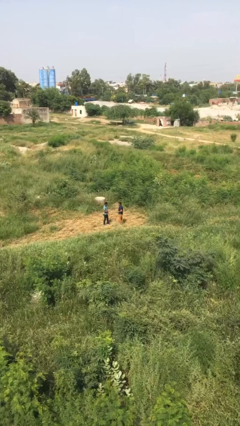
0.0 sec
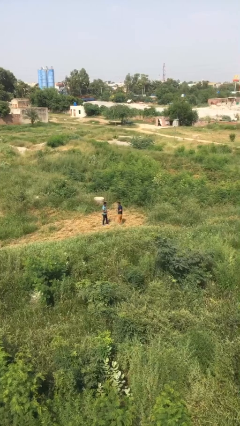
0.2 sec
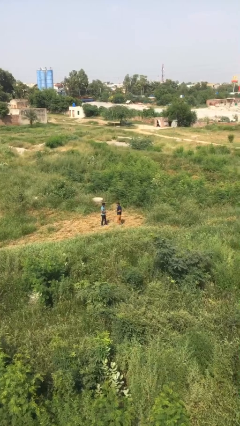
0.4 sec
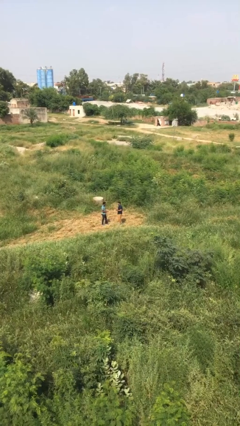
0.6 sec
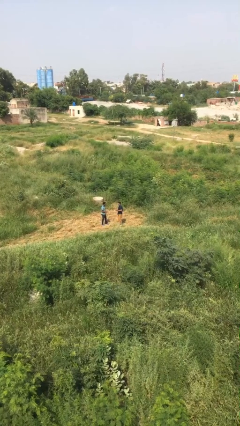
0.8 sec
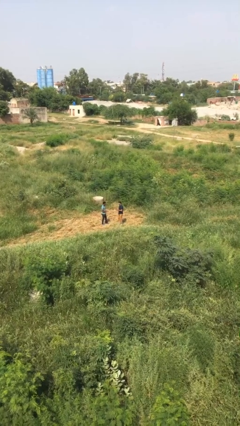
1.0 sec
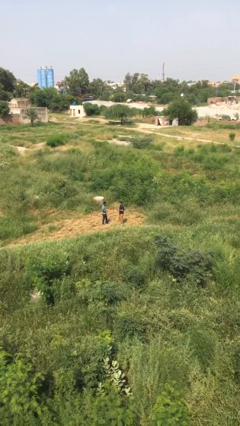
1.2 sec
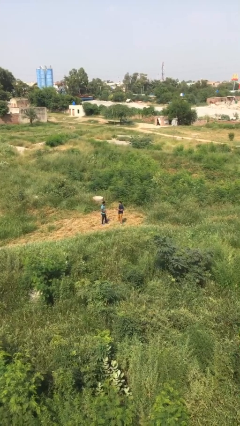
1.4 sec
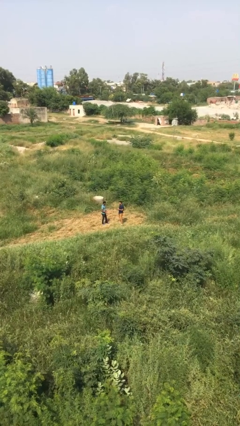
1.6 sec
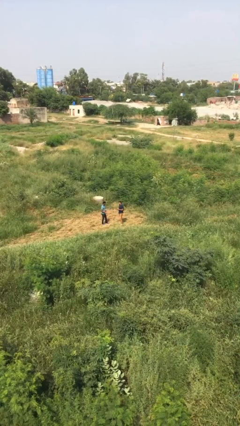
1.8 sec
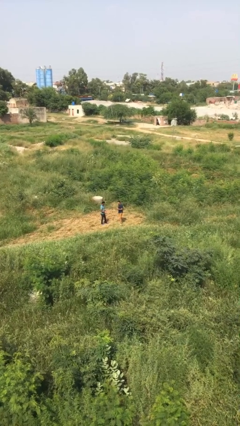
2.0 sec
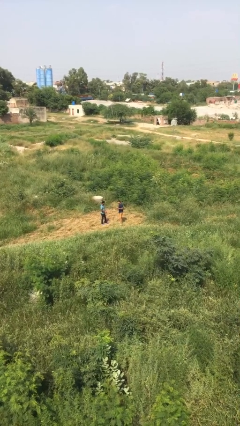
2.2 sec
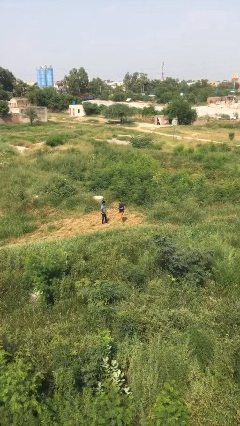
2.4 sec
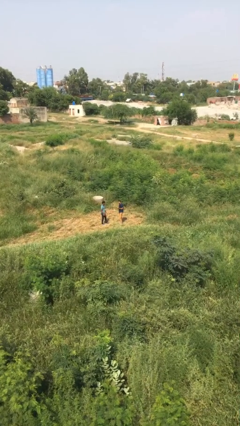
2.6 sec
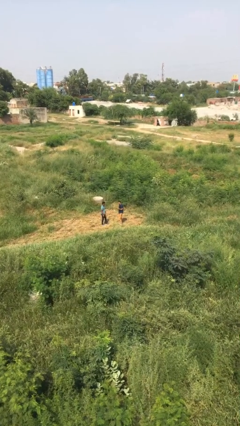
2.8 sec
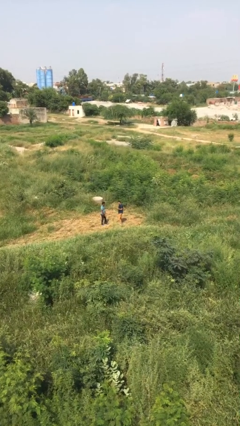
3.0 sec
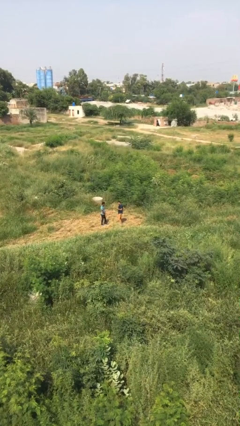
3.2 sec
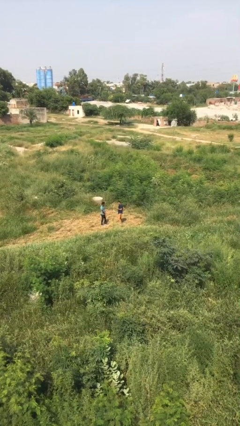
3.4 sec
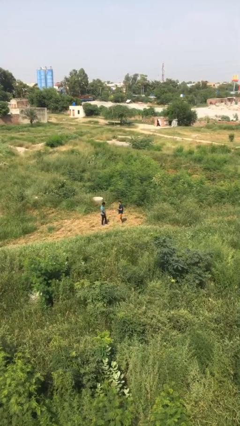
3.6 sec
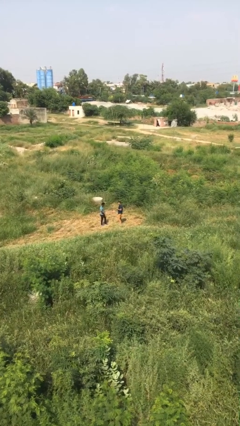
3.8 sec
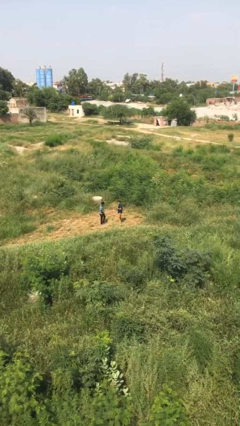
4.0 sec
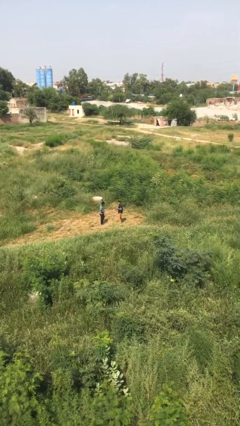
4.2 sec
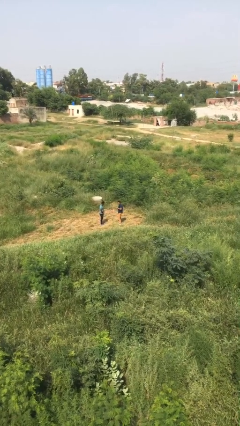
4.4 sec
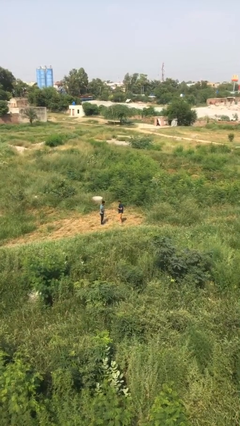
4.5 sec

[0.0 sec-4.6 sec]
person talks to person

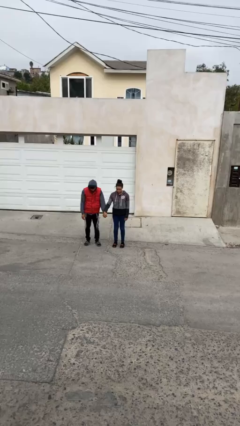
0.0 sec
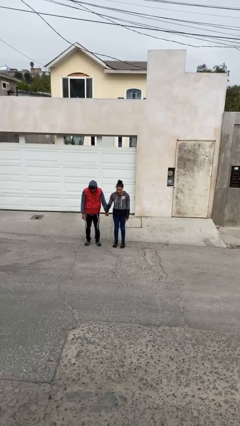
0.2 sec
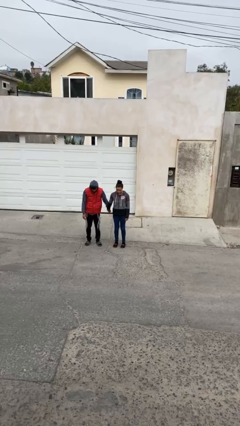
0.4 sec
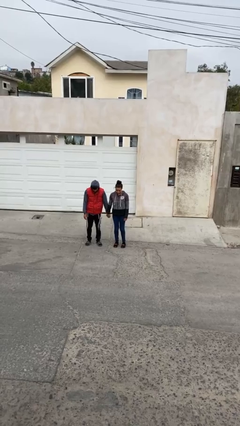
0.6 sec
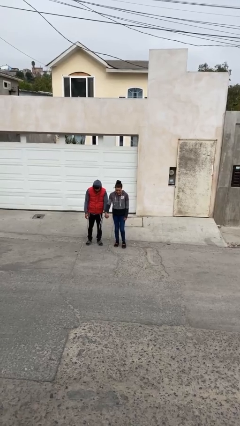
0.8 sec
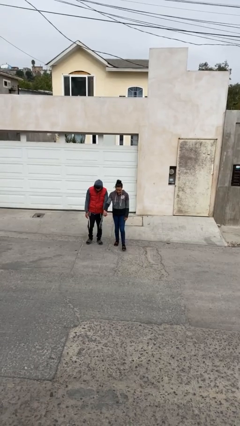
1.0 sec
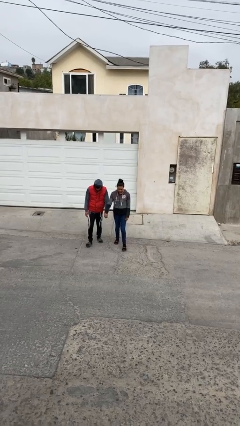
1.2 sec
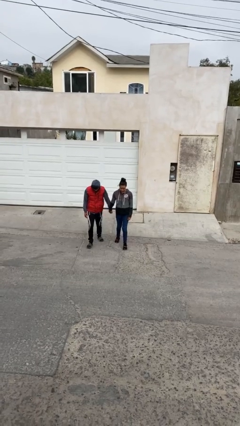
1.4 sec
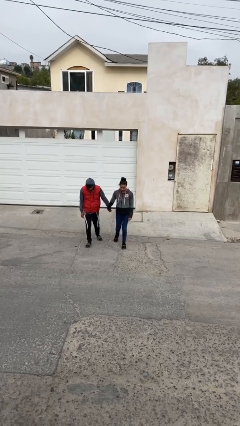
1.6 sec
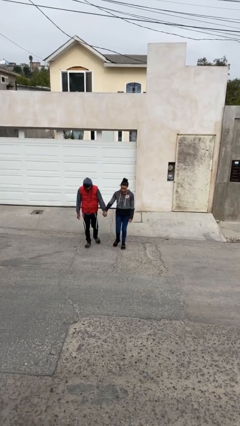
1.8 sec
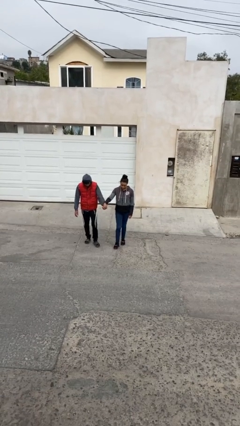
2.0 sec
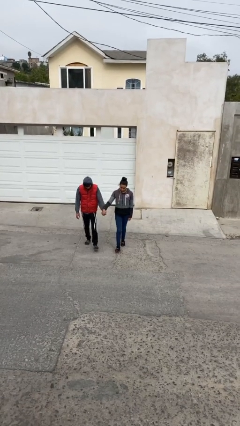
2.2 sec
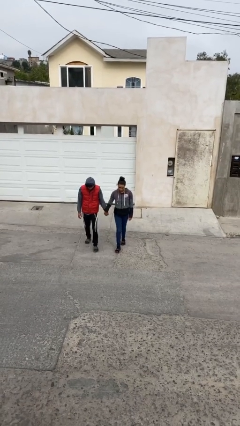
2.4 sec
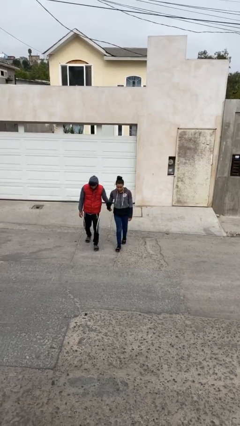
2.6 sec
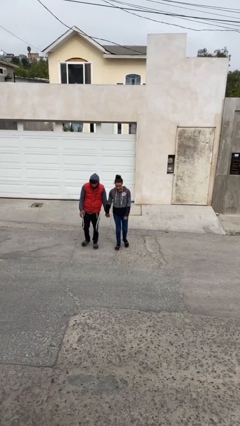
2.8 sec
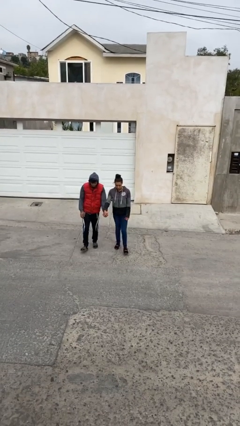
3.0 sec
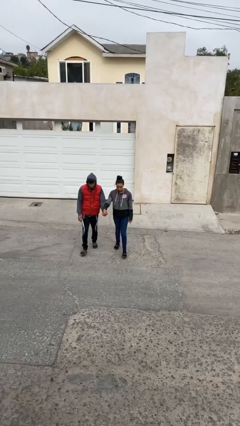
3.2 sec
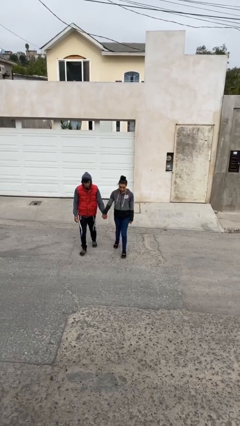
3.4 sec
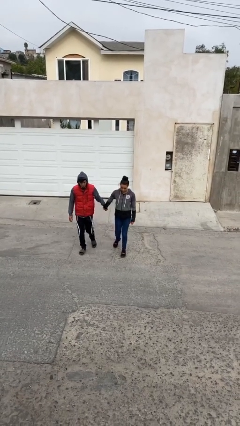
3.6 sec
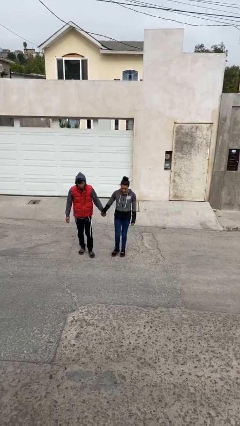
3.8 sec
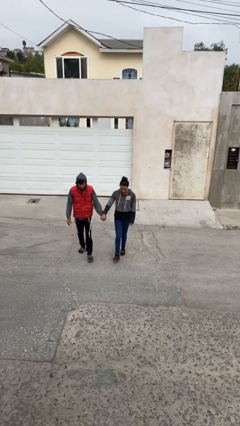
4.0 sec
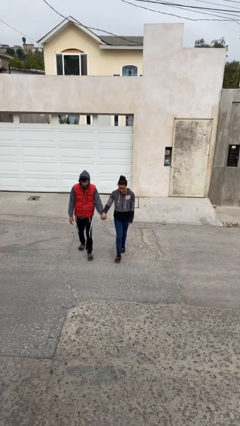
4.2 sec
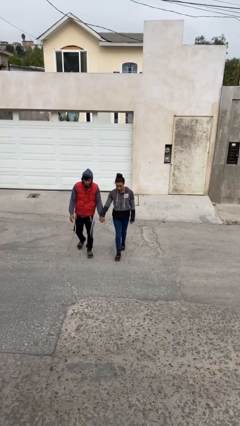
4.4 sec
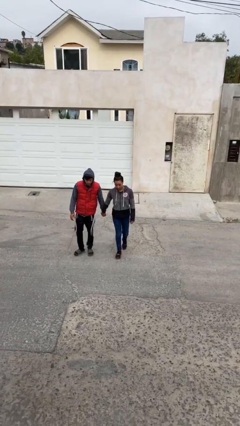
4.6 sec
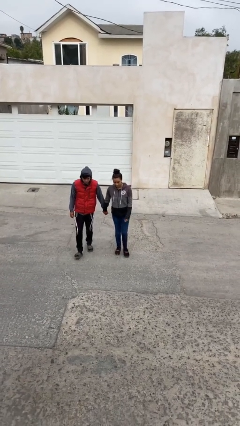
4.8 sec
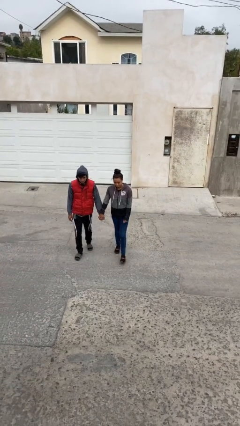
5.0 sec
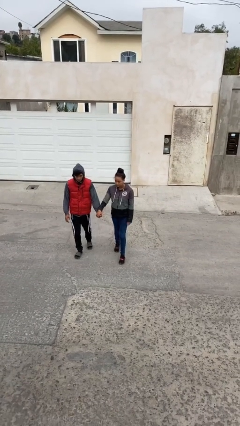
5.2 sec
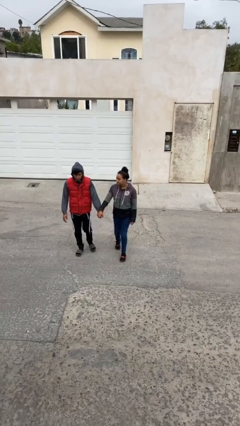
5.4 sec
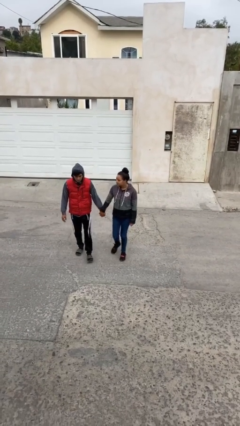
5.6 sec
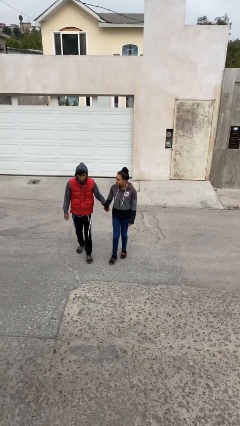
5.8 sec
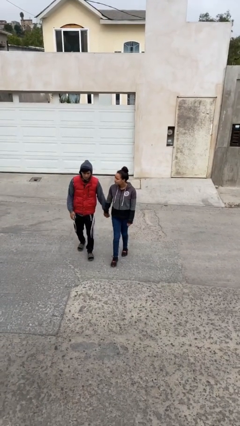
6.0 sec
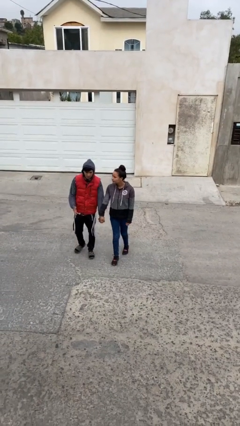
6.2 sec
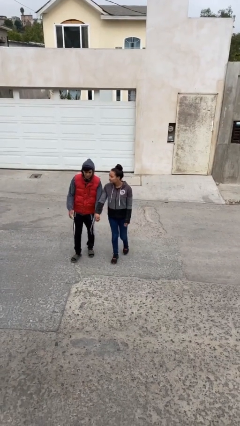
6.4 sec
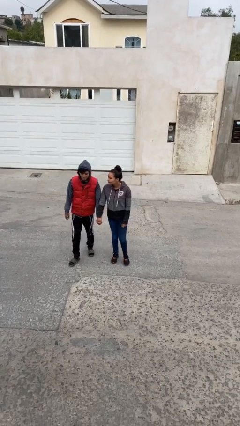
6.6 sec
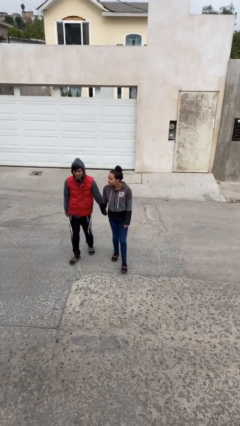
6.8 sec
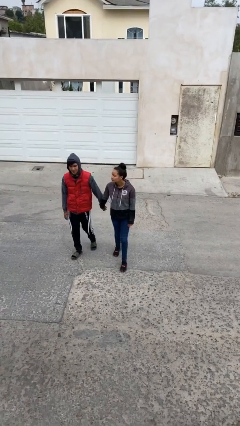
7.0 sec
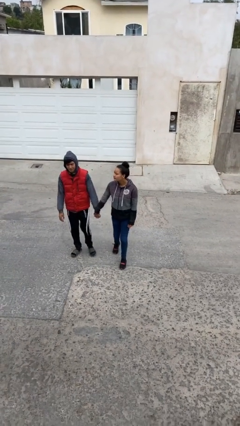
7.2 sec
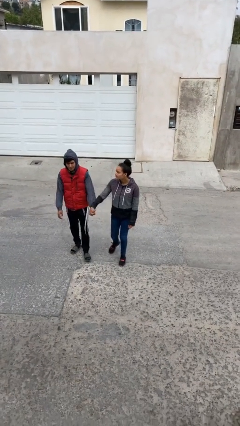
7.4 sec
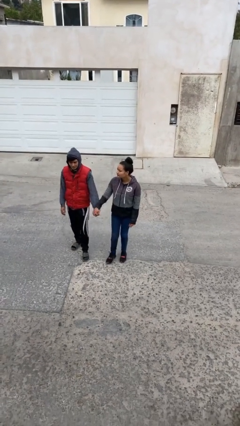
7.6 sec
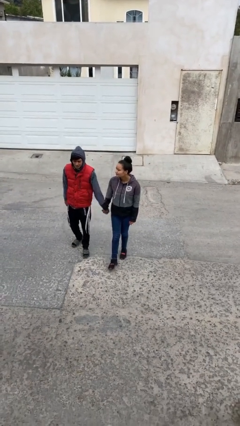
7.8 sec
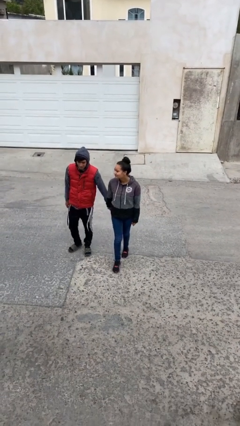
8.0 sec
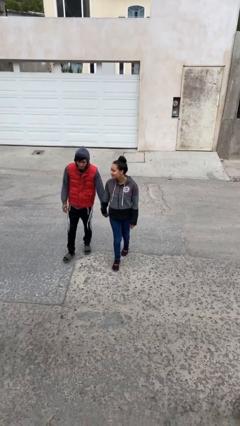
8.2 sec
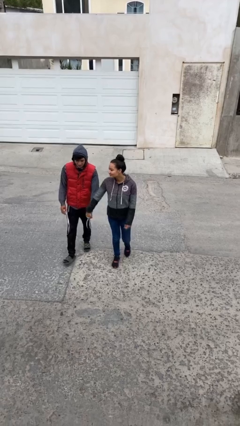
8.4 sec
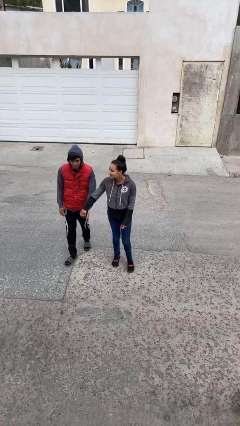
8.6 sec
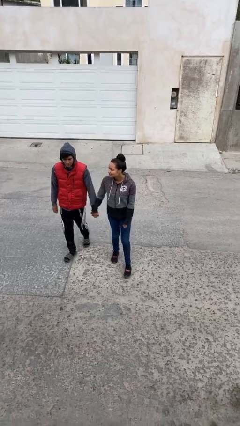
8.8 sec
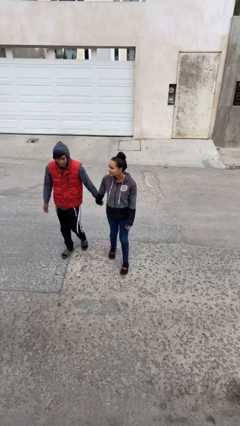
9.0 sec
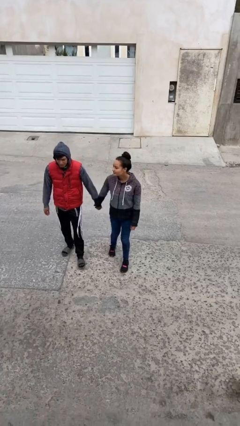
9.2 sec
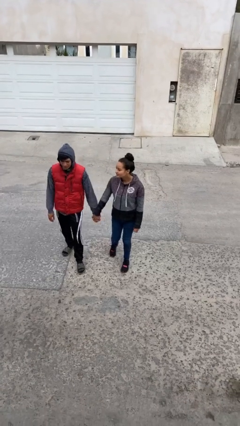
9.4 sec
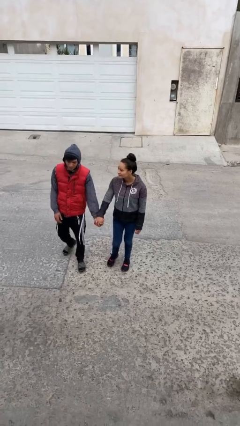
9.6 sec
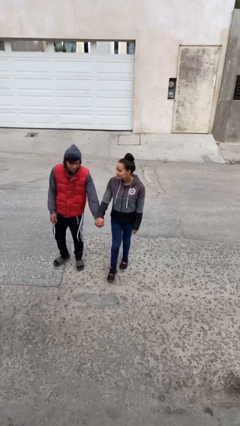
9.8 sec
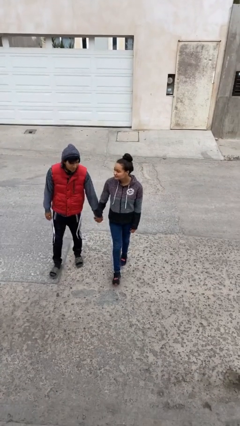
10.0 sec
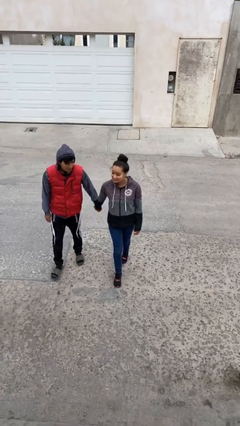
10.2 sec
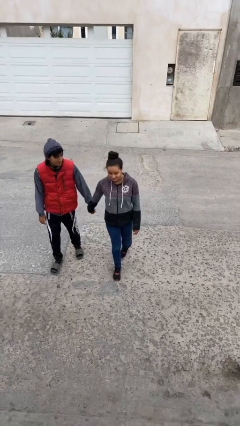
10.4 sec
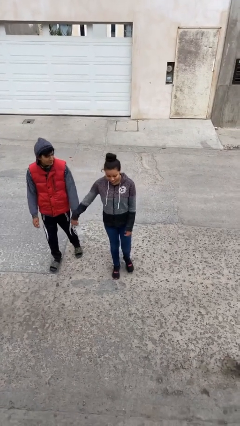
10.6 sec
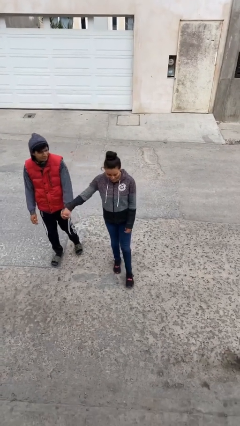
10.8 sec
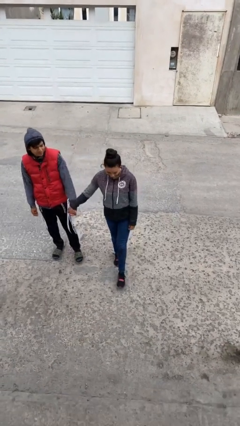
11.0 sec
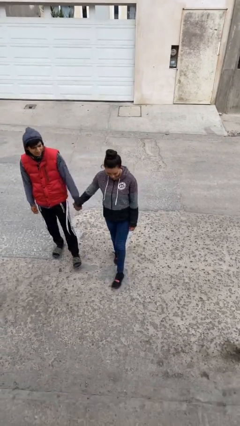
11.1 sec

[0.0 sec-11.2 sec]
person holds hand

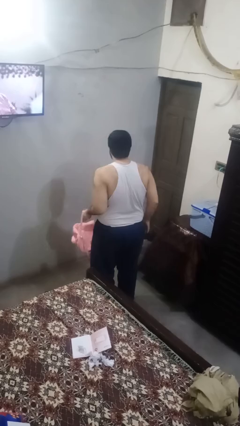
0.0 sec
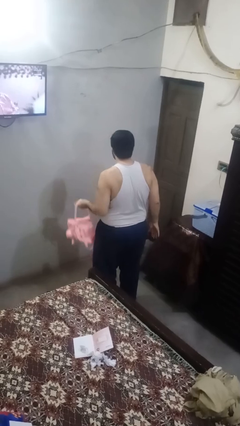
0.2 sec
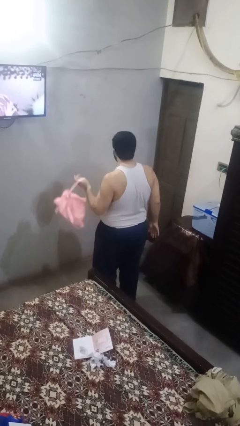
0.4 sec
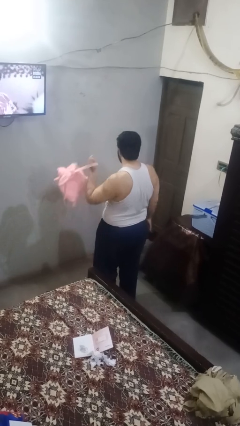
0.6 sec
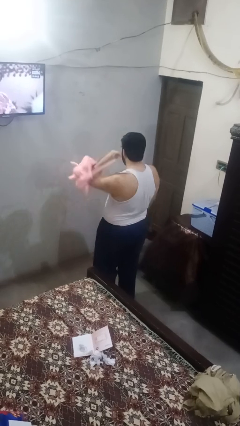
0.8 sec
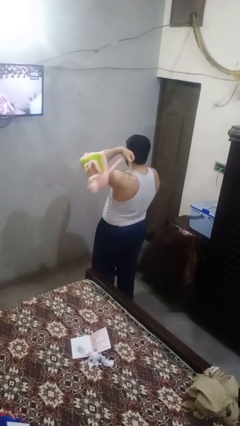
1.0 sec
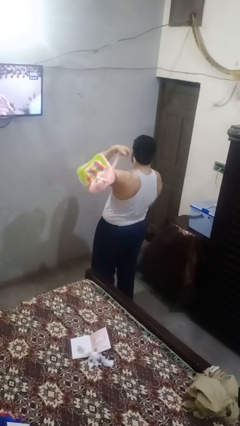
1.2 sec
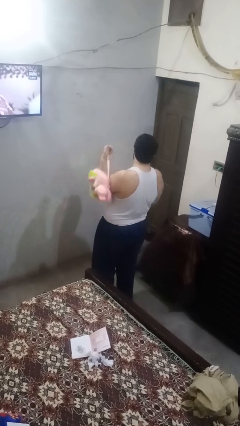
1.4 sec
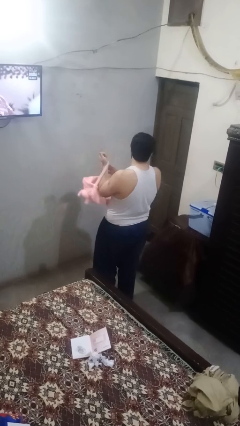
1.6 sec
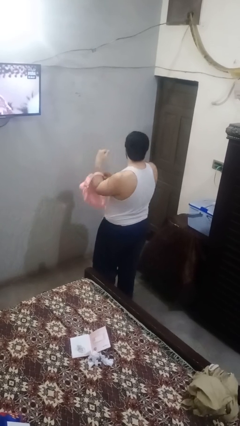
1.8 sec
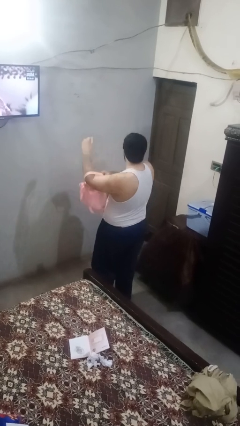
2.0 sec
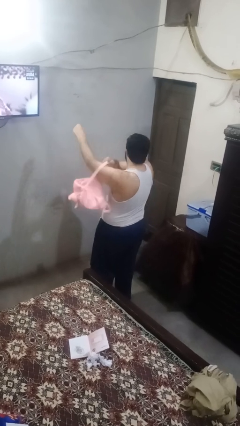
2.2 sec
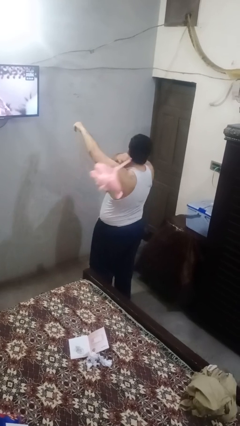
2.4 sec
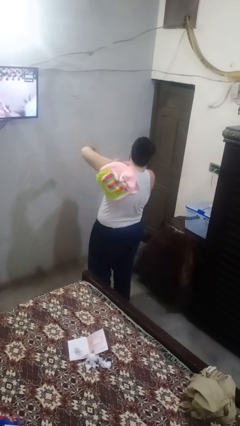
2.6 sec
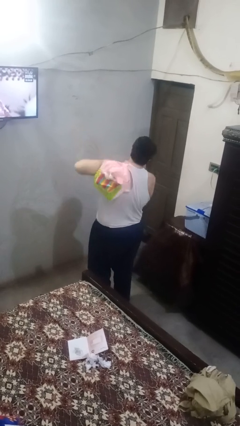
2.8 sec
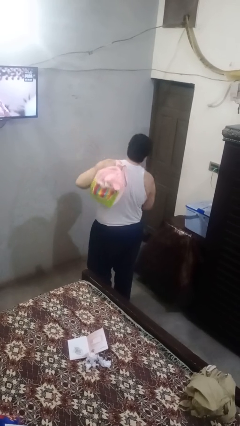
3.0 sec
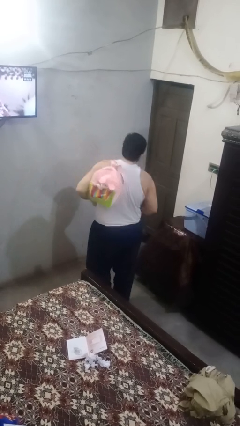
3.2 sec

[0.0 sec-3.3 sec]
person puts on backpack
